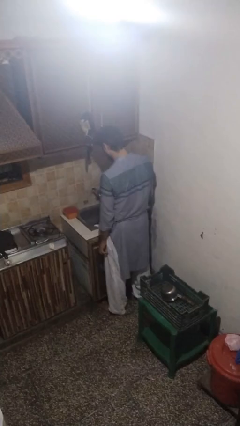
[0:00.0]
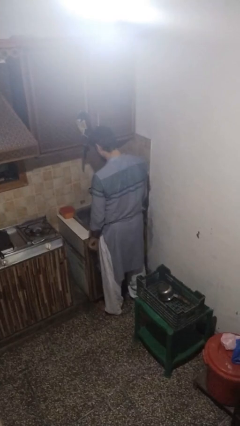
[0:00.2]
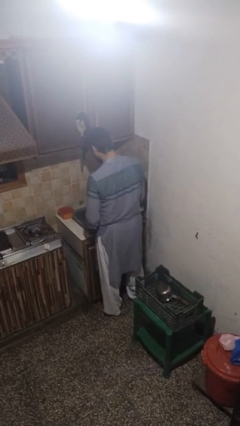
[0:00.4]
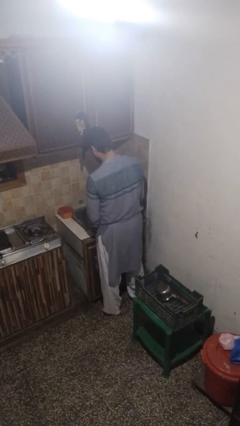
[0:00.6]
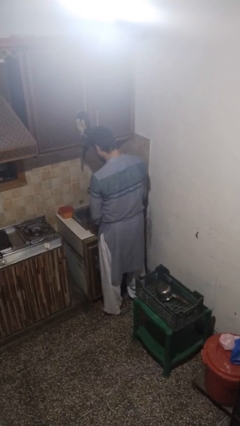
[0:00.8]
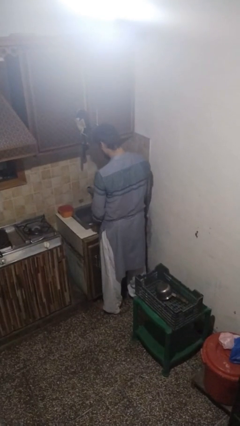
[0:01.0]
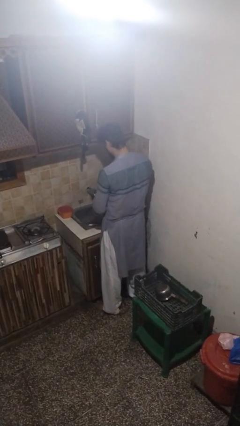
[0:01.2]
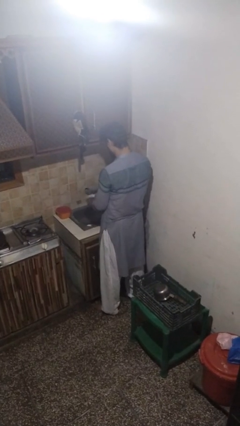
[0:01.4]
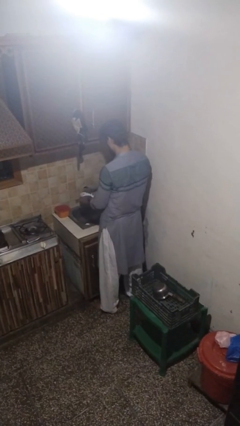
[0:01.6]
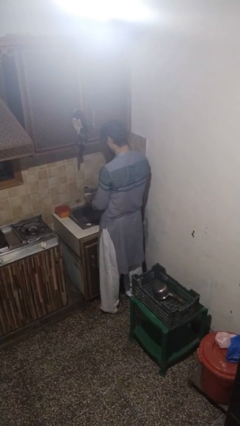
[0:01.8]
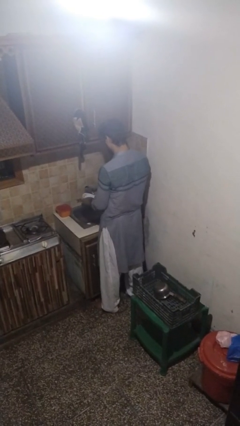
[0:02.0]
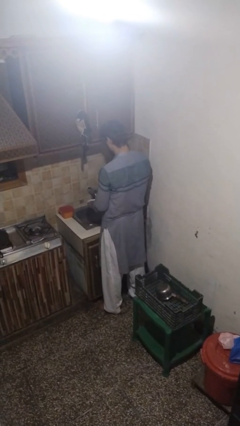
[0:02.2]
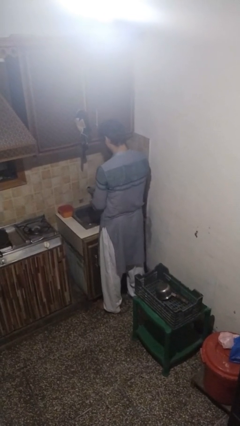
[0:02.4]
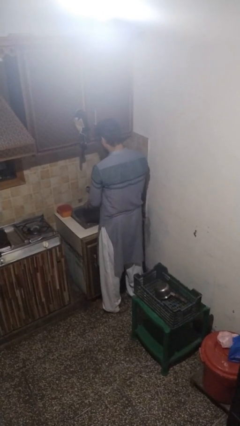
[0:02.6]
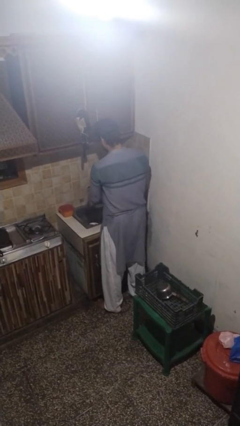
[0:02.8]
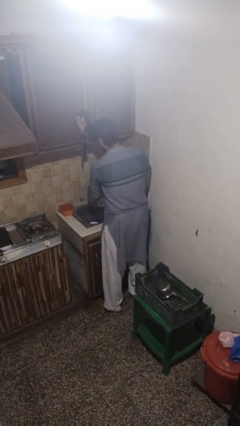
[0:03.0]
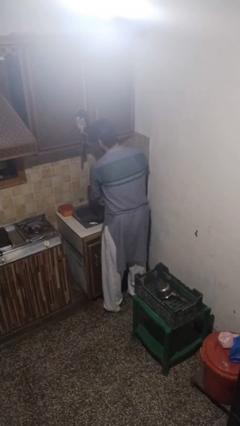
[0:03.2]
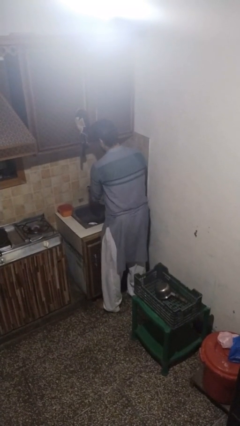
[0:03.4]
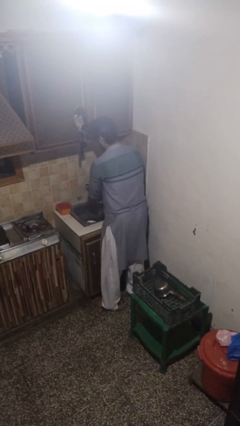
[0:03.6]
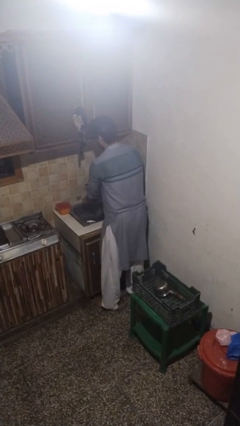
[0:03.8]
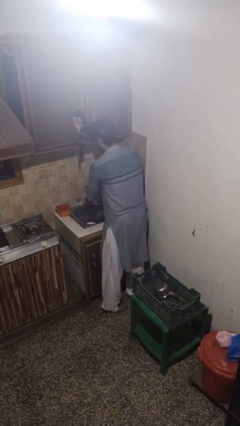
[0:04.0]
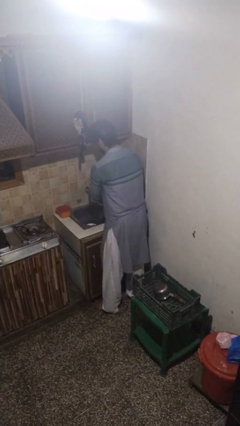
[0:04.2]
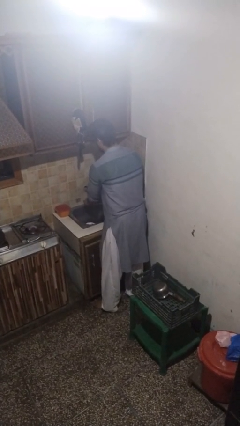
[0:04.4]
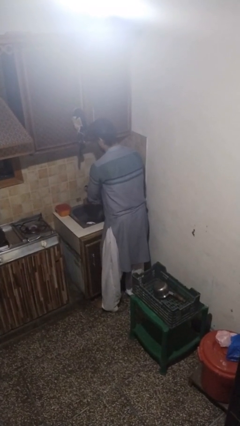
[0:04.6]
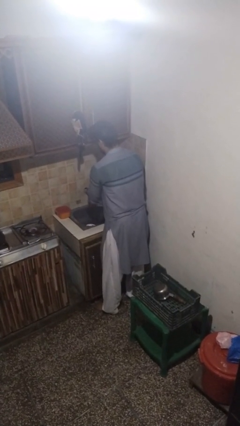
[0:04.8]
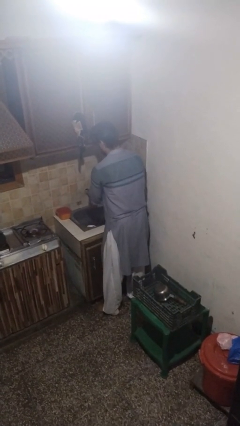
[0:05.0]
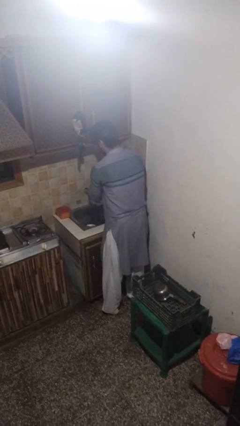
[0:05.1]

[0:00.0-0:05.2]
person washes dish

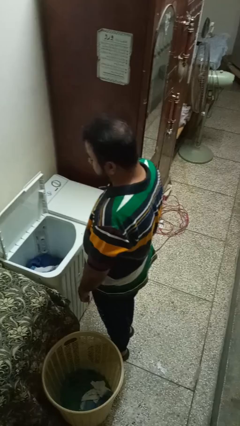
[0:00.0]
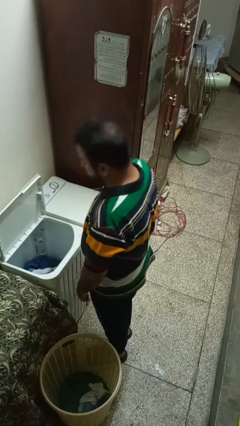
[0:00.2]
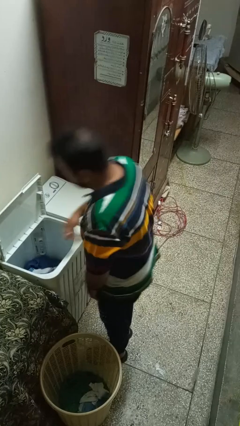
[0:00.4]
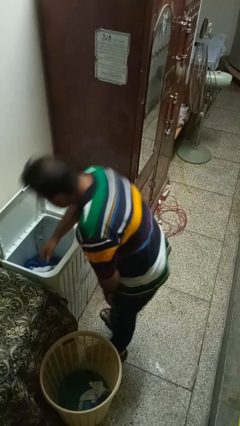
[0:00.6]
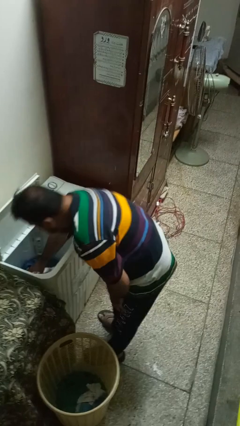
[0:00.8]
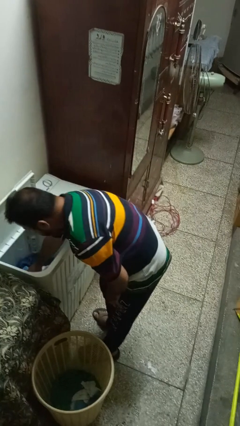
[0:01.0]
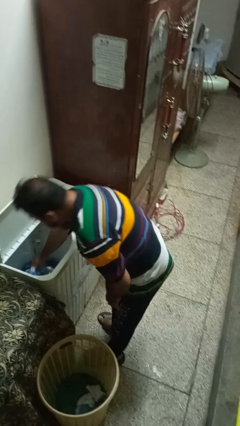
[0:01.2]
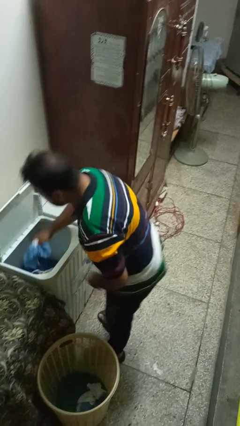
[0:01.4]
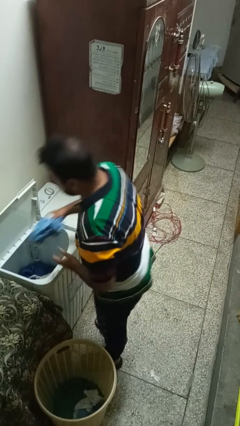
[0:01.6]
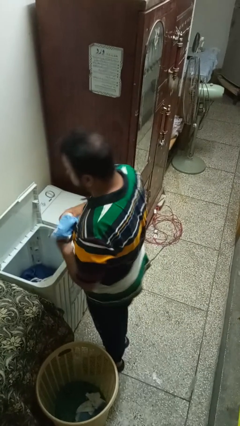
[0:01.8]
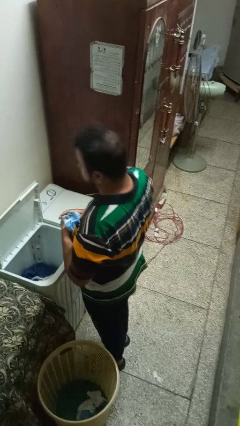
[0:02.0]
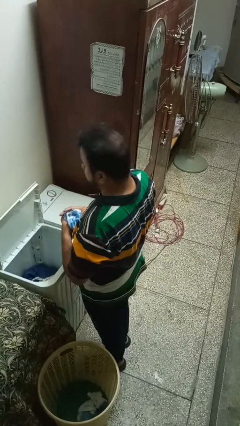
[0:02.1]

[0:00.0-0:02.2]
person unloads clotheswasher

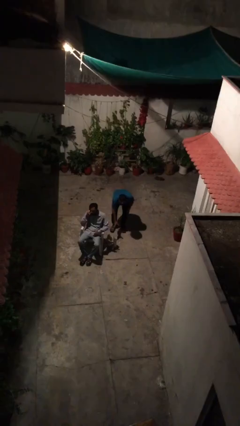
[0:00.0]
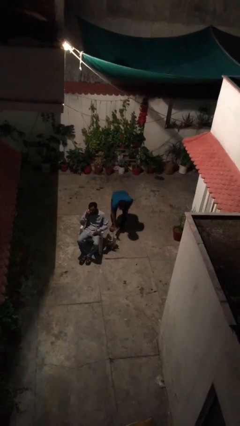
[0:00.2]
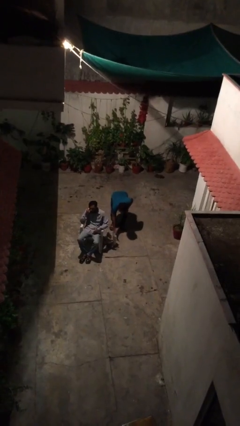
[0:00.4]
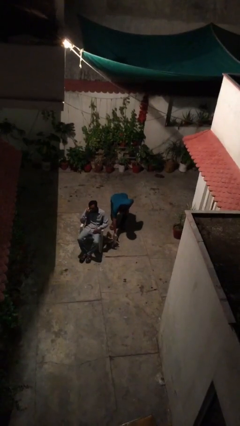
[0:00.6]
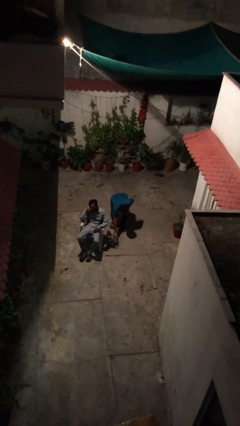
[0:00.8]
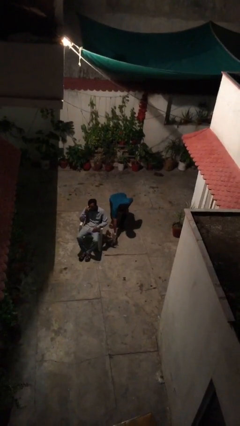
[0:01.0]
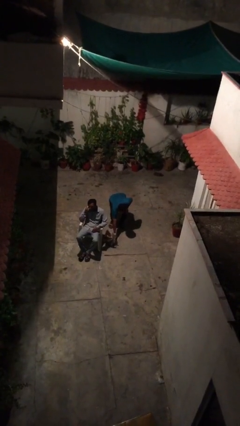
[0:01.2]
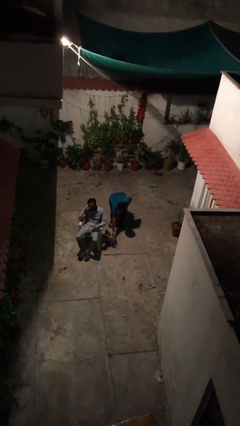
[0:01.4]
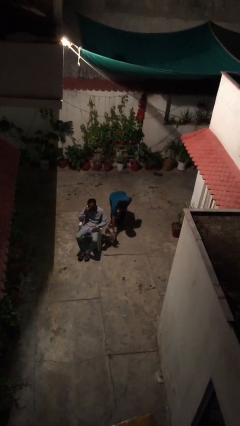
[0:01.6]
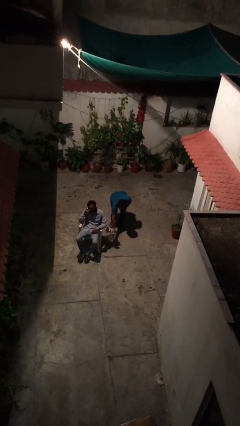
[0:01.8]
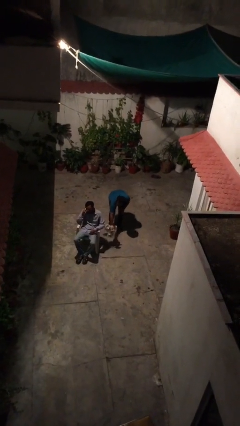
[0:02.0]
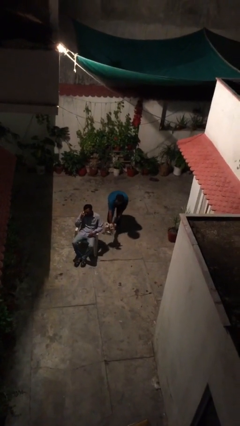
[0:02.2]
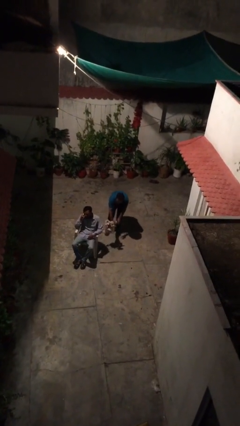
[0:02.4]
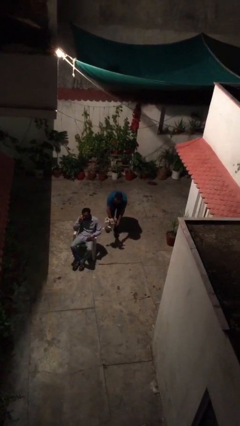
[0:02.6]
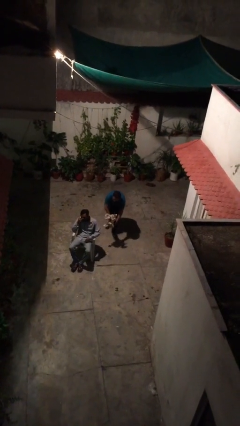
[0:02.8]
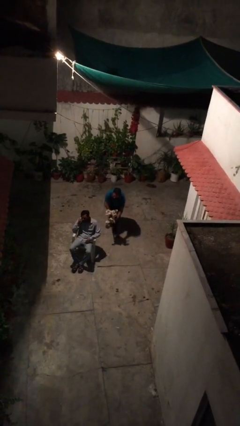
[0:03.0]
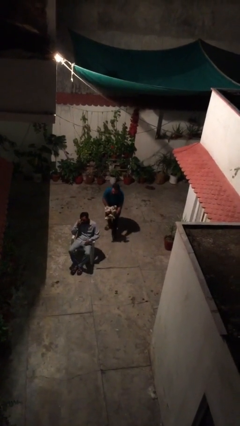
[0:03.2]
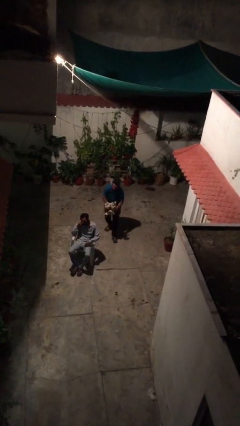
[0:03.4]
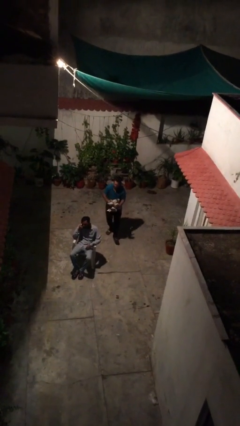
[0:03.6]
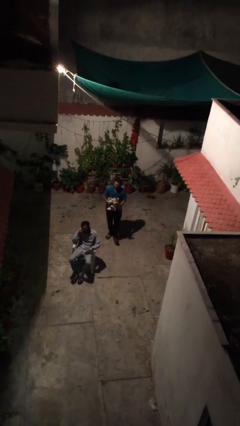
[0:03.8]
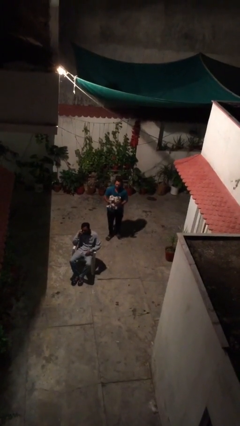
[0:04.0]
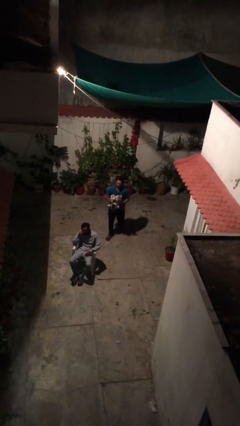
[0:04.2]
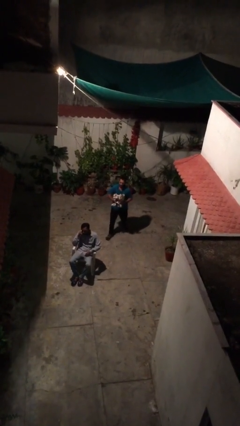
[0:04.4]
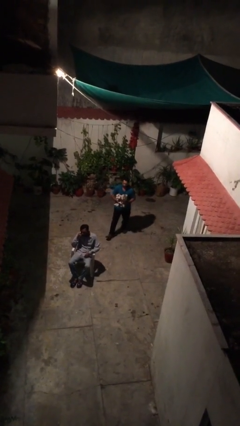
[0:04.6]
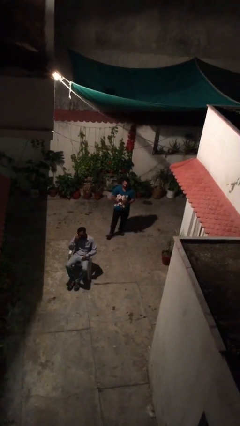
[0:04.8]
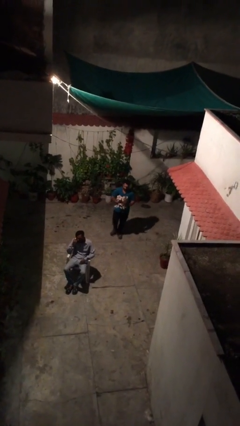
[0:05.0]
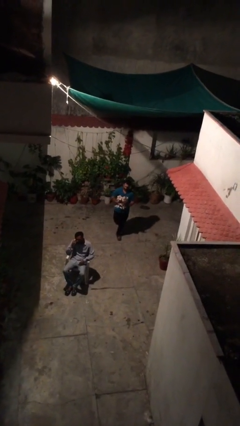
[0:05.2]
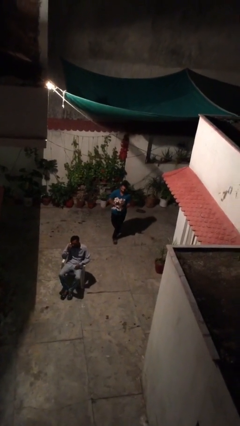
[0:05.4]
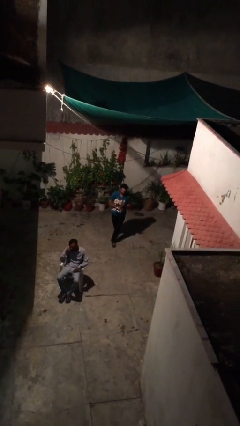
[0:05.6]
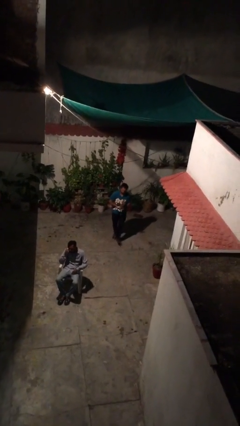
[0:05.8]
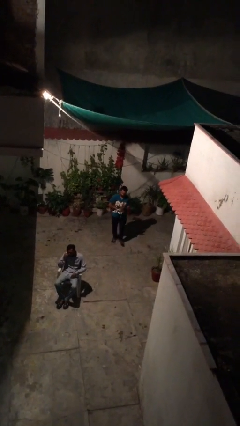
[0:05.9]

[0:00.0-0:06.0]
person steals object from person

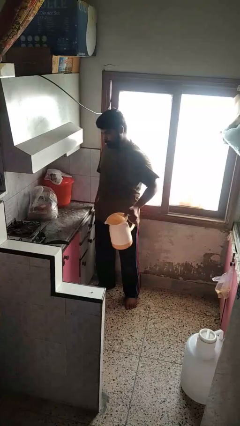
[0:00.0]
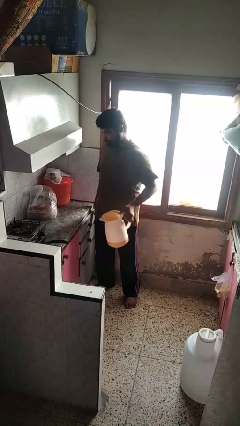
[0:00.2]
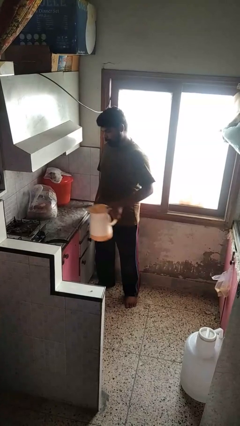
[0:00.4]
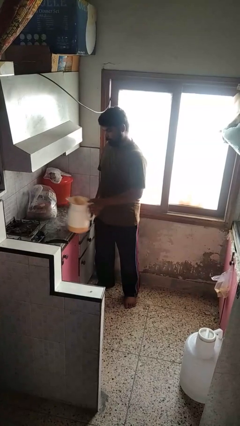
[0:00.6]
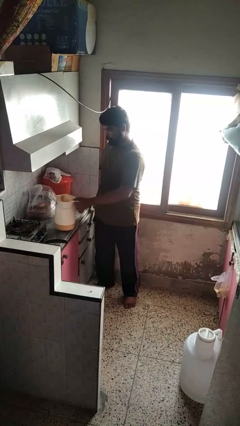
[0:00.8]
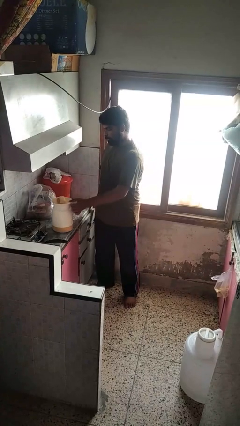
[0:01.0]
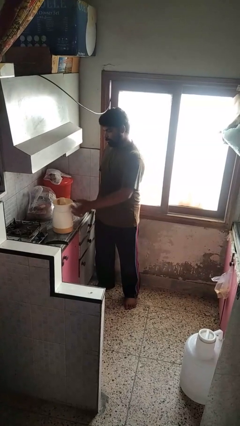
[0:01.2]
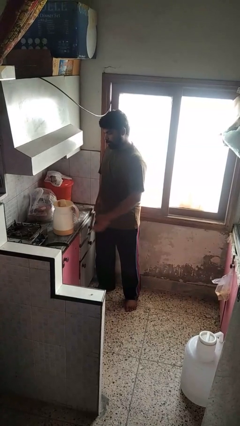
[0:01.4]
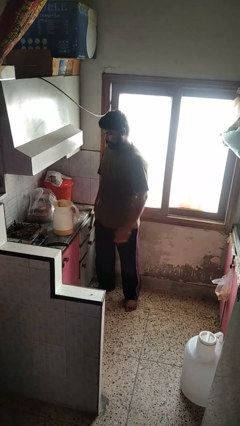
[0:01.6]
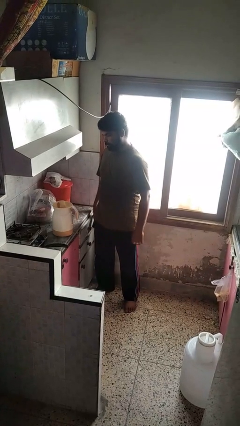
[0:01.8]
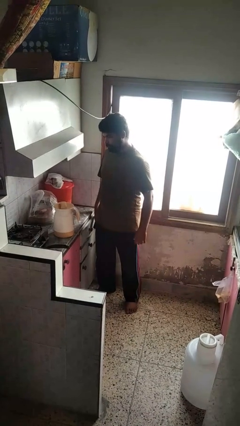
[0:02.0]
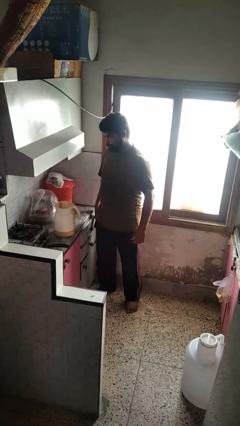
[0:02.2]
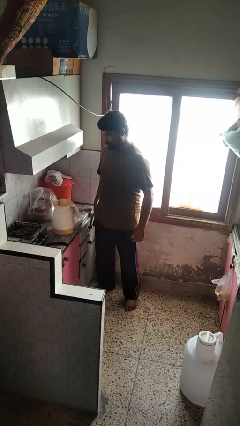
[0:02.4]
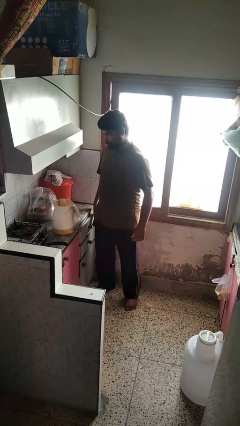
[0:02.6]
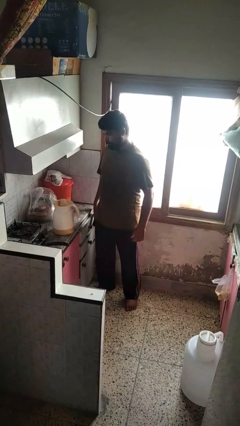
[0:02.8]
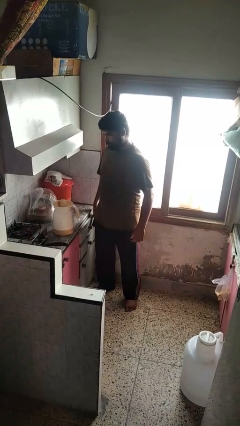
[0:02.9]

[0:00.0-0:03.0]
person puts down object on countertop

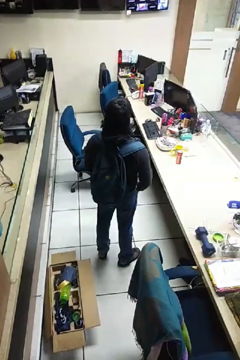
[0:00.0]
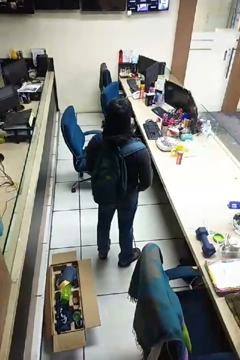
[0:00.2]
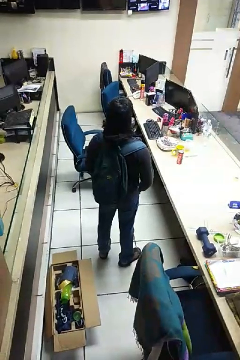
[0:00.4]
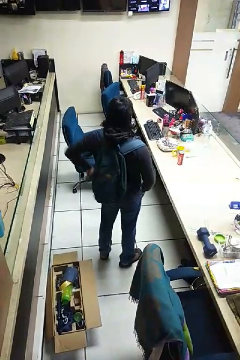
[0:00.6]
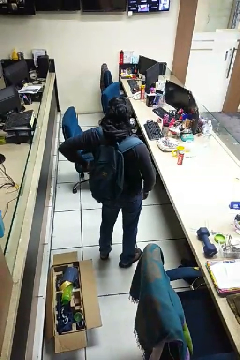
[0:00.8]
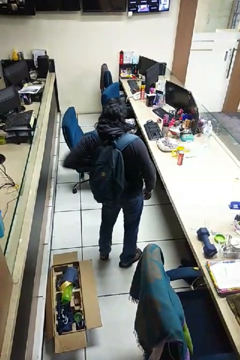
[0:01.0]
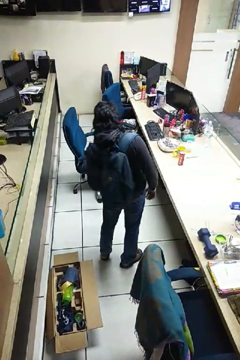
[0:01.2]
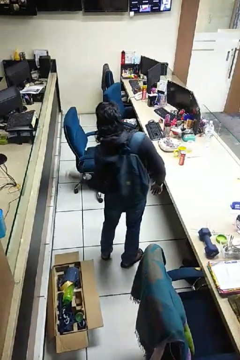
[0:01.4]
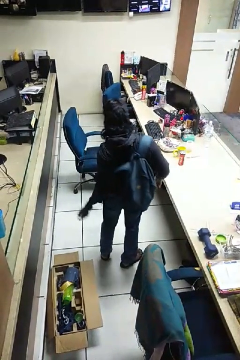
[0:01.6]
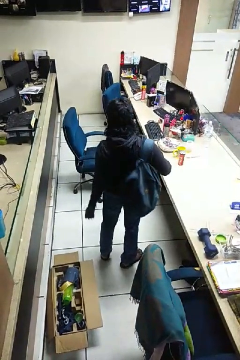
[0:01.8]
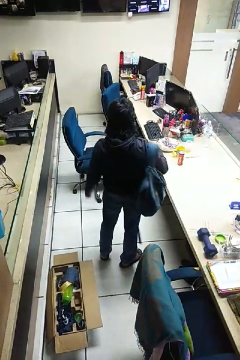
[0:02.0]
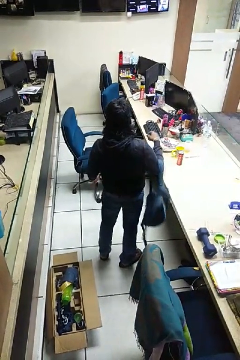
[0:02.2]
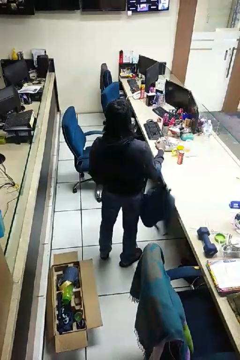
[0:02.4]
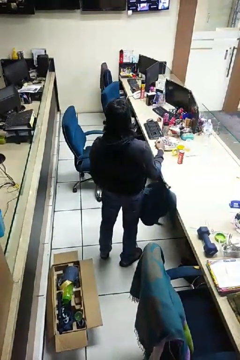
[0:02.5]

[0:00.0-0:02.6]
person takes off backpack
